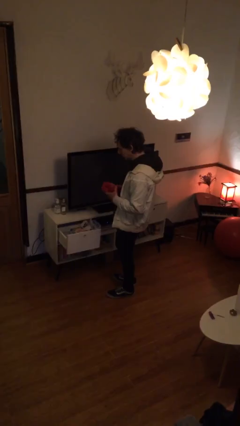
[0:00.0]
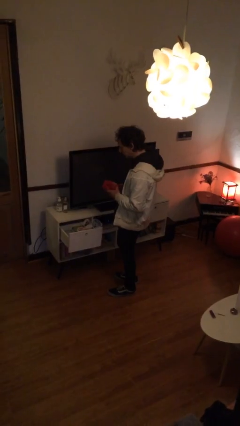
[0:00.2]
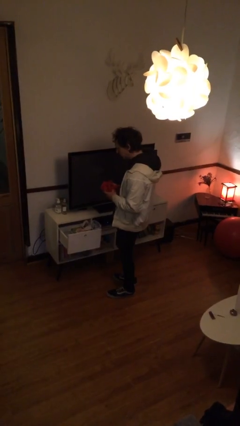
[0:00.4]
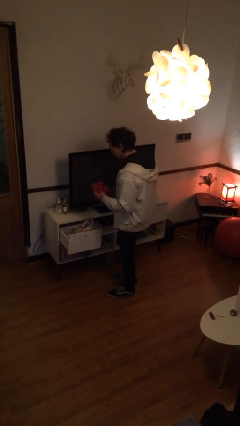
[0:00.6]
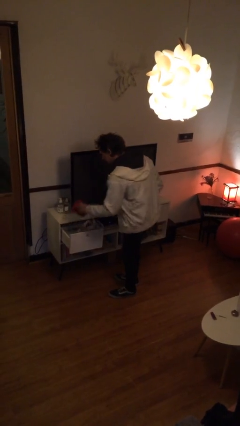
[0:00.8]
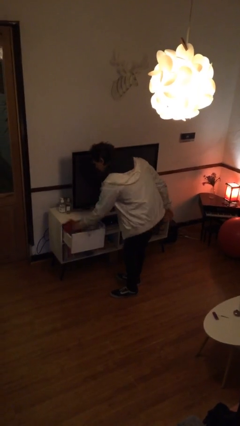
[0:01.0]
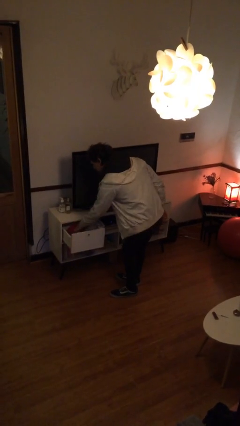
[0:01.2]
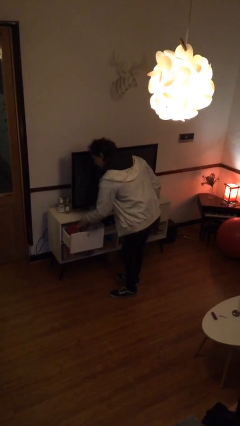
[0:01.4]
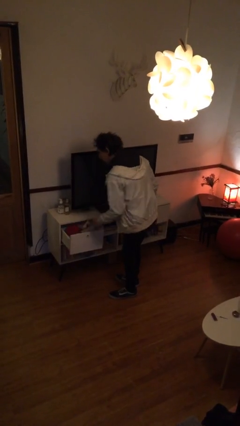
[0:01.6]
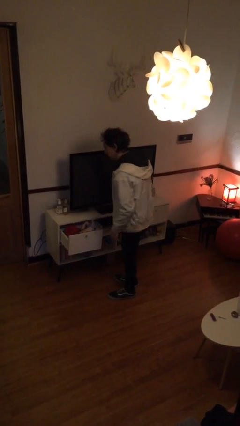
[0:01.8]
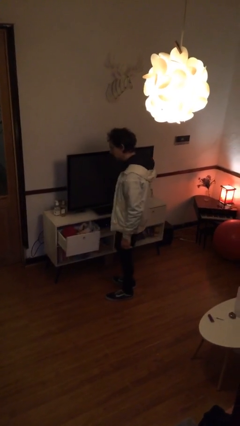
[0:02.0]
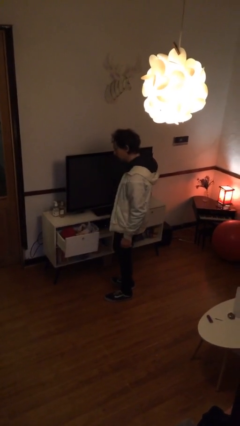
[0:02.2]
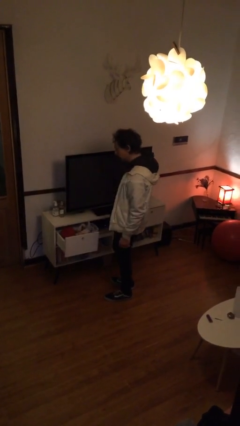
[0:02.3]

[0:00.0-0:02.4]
person puts clothes into dresser

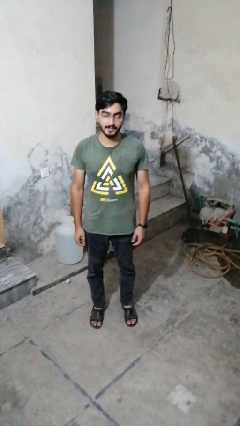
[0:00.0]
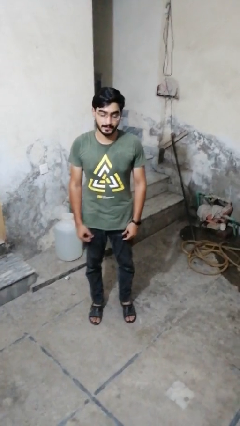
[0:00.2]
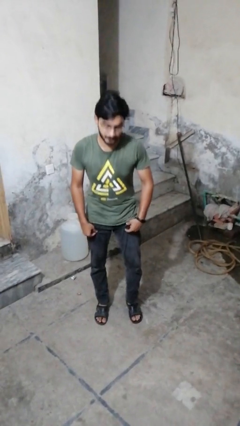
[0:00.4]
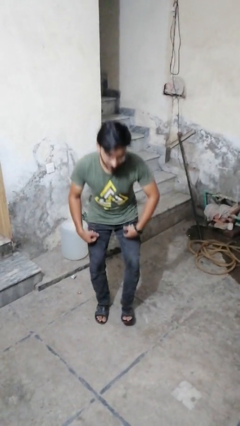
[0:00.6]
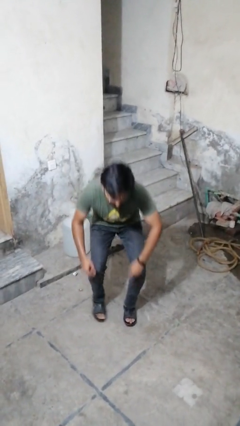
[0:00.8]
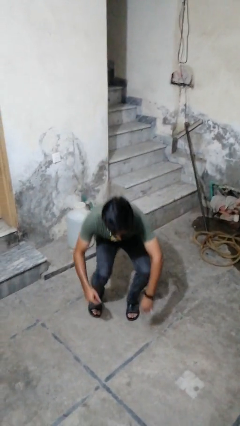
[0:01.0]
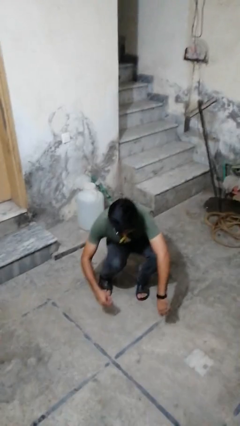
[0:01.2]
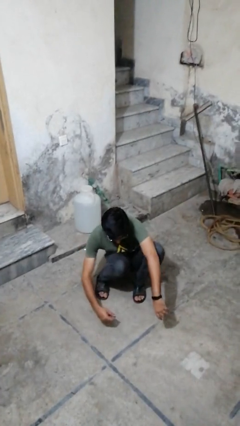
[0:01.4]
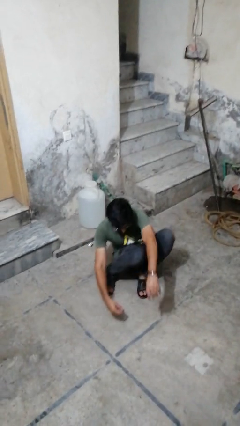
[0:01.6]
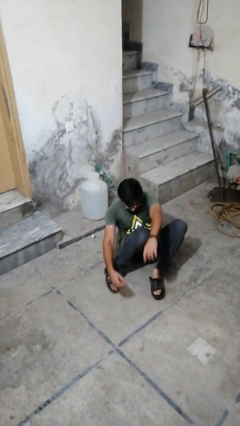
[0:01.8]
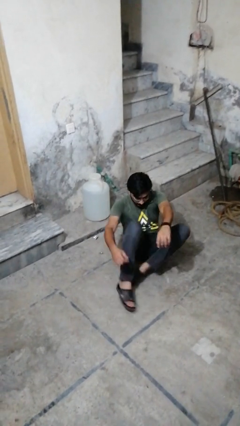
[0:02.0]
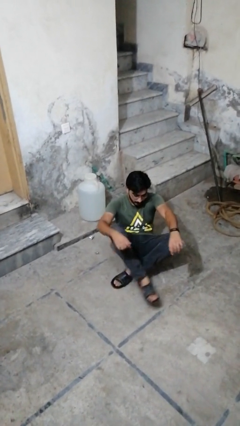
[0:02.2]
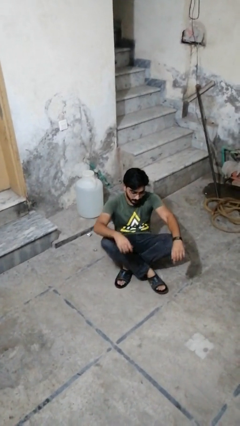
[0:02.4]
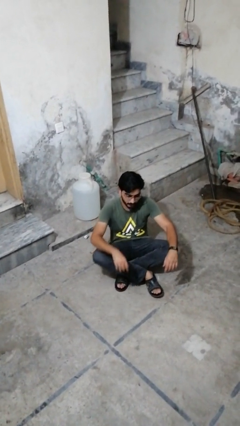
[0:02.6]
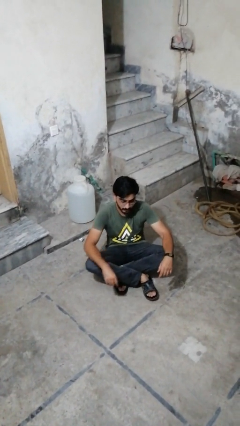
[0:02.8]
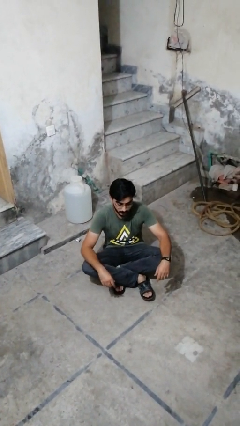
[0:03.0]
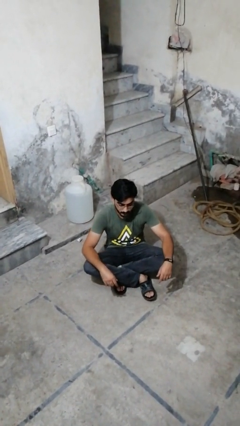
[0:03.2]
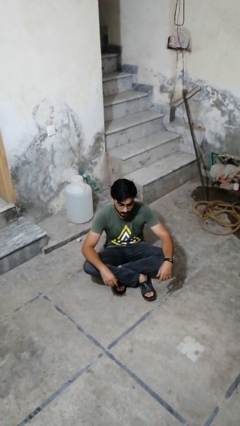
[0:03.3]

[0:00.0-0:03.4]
person sits crisscross

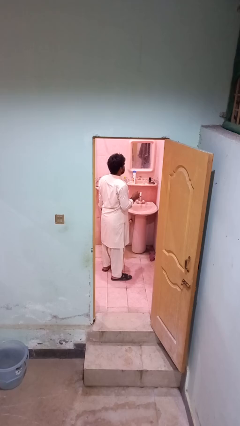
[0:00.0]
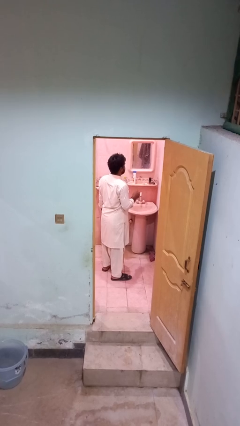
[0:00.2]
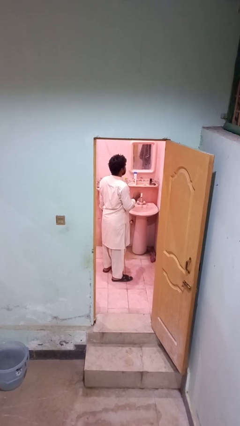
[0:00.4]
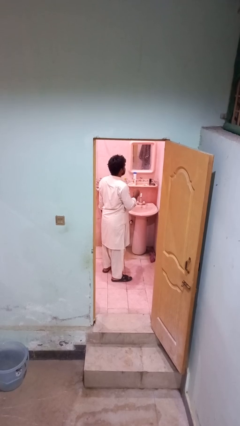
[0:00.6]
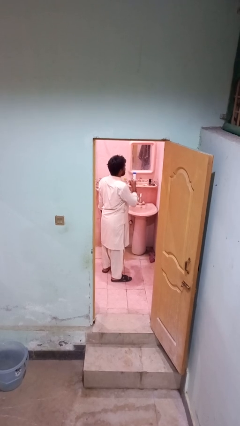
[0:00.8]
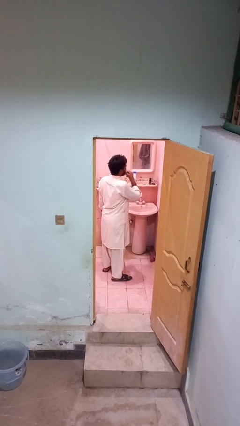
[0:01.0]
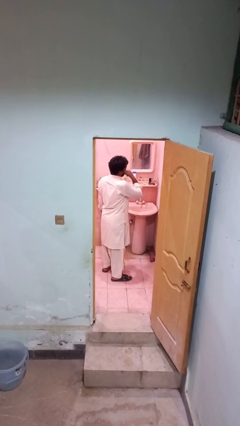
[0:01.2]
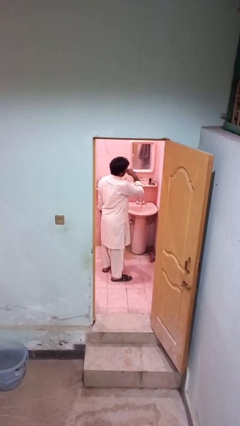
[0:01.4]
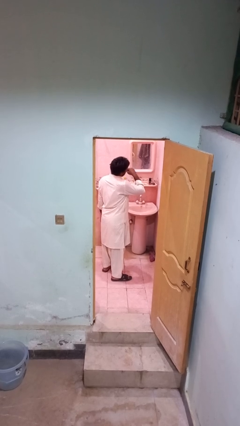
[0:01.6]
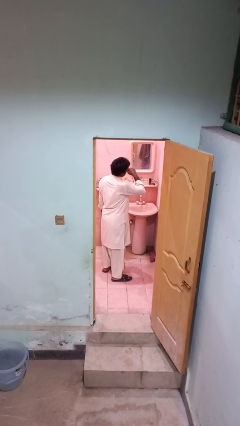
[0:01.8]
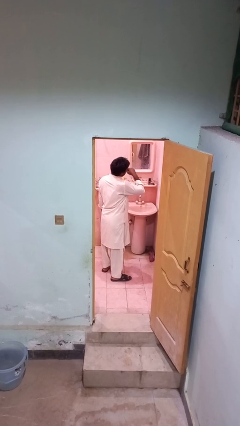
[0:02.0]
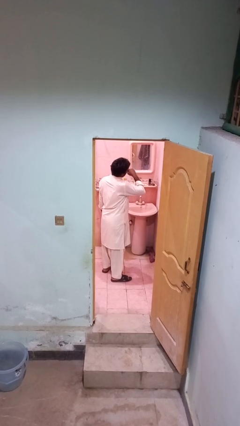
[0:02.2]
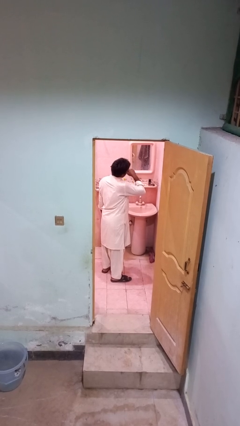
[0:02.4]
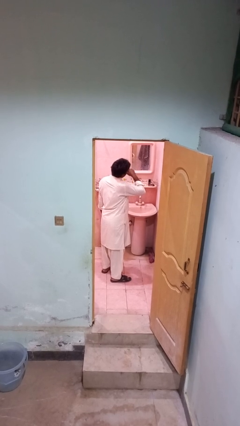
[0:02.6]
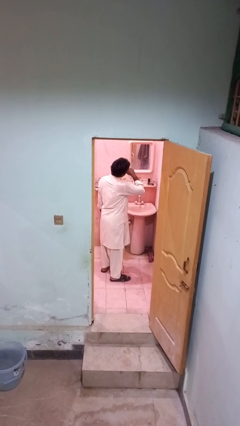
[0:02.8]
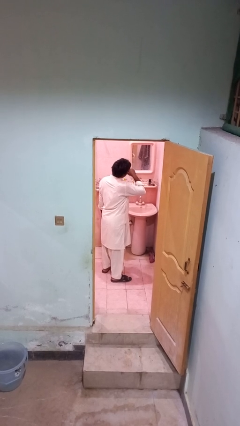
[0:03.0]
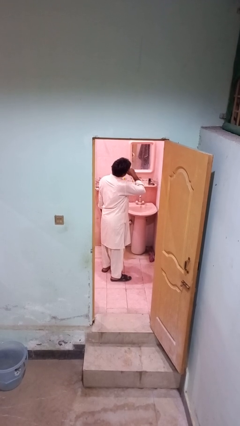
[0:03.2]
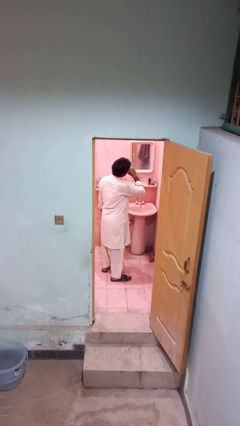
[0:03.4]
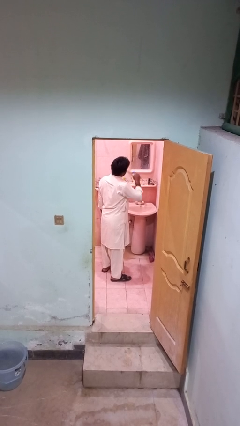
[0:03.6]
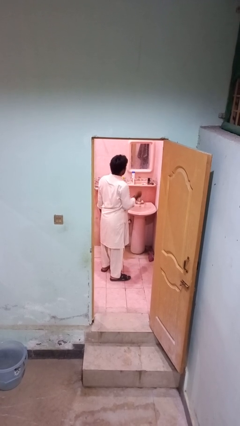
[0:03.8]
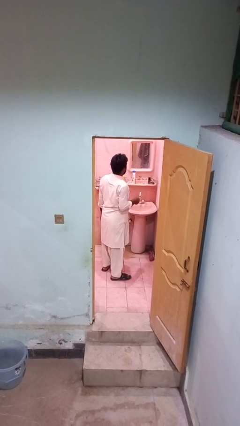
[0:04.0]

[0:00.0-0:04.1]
person flosses

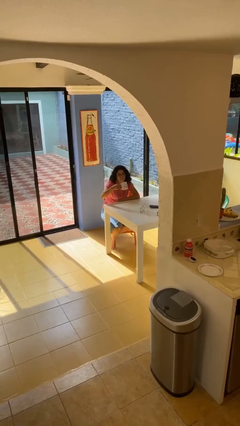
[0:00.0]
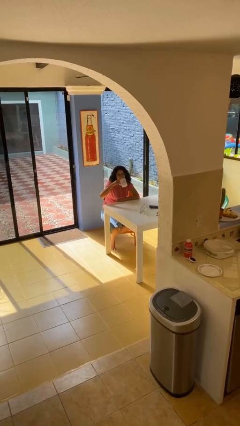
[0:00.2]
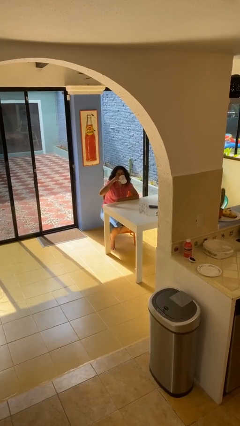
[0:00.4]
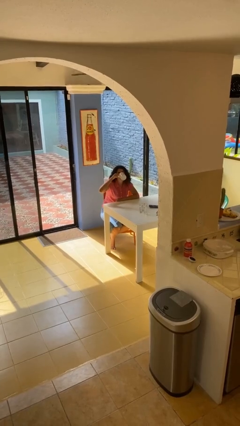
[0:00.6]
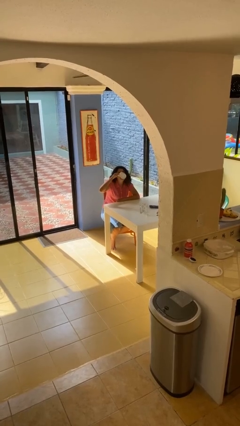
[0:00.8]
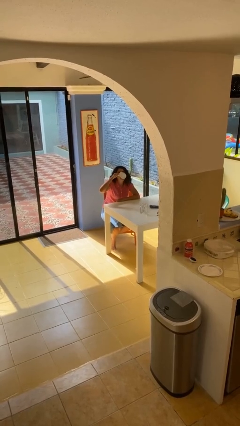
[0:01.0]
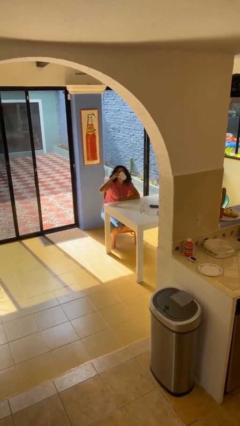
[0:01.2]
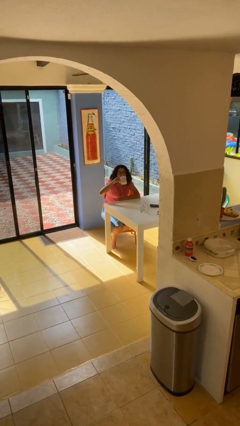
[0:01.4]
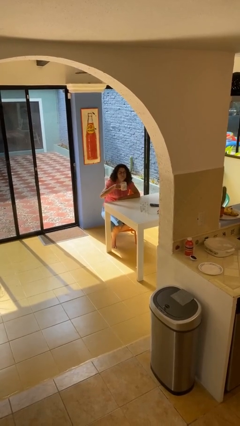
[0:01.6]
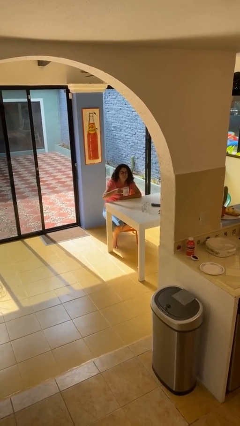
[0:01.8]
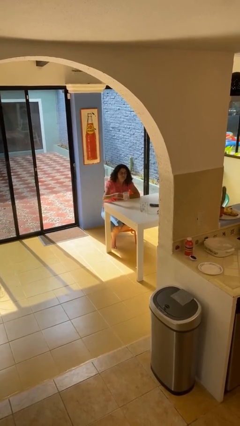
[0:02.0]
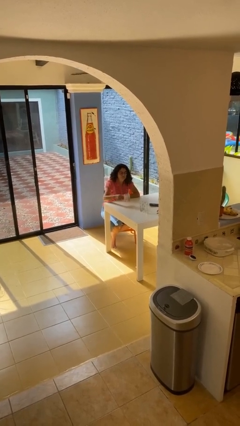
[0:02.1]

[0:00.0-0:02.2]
person drinks from mug

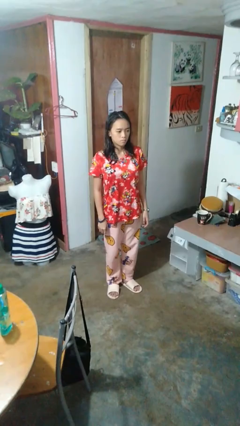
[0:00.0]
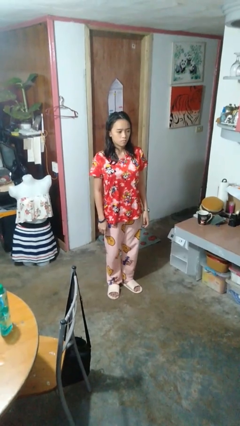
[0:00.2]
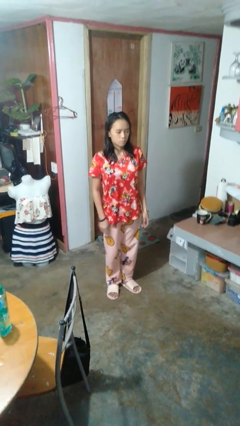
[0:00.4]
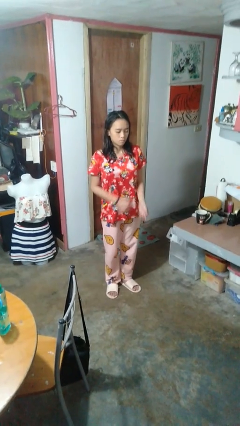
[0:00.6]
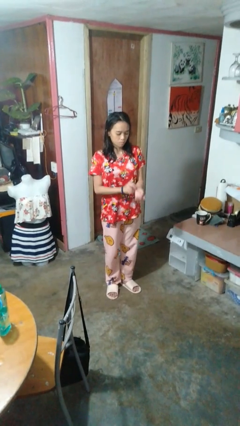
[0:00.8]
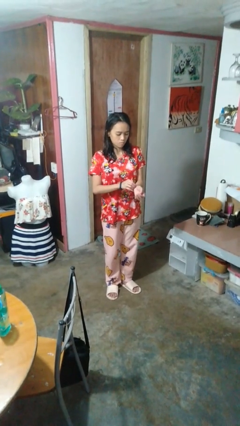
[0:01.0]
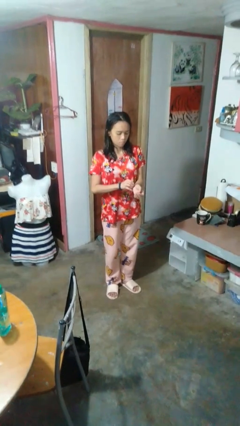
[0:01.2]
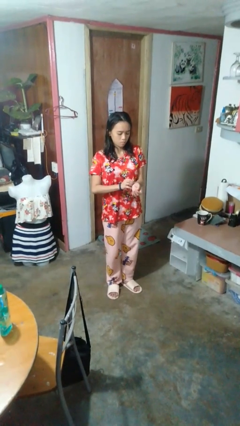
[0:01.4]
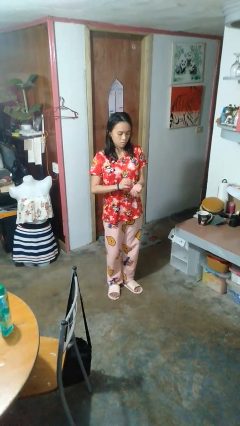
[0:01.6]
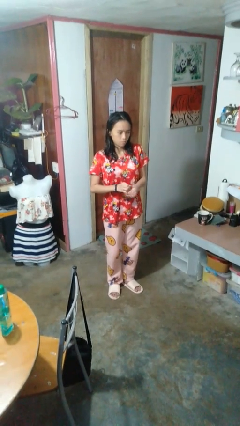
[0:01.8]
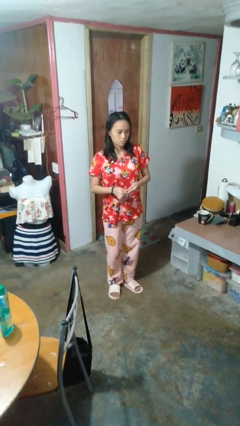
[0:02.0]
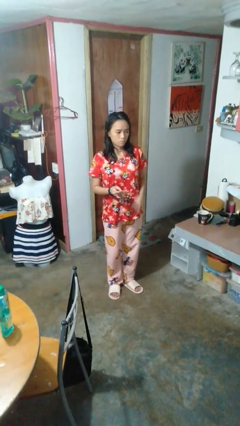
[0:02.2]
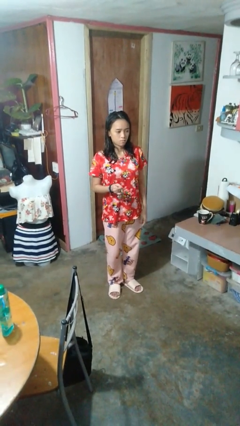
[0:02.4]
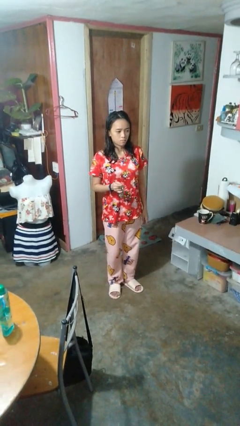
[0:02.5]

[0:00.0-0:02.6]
person takes off wristwatch

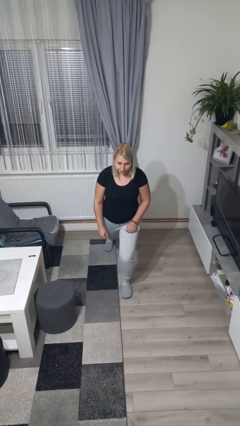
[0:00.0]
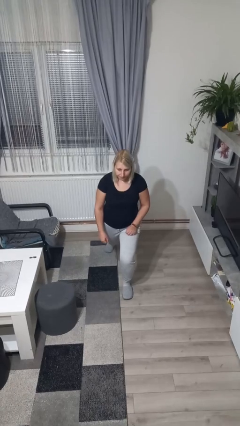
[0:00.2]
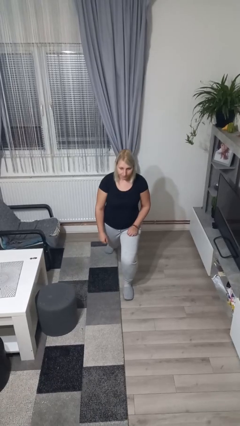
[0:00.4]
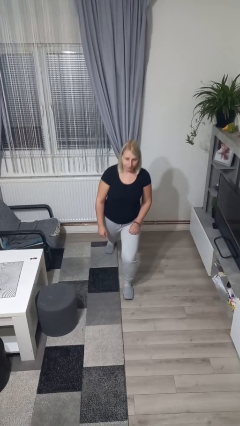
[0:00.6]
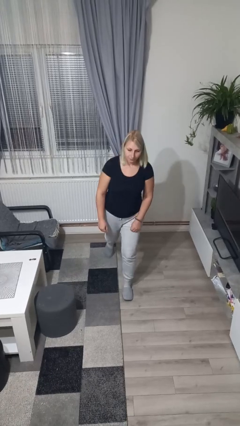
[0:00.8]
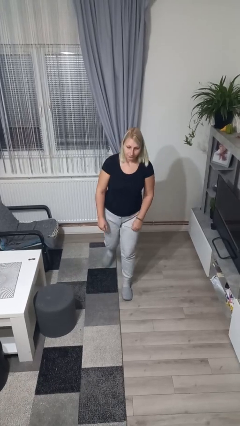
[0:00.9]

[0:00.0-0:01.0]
person exercises with lunges

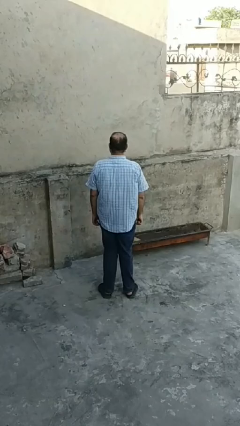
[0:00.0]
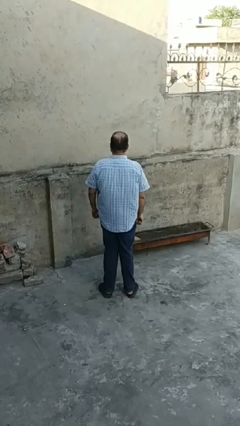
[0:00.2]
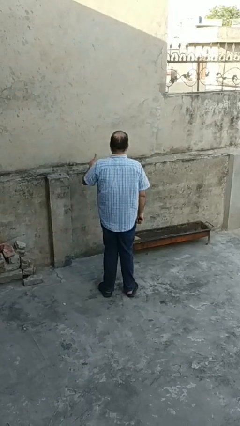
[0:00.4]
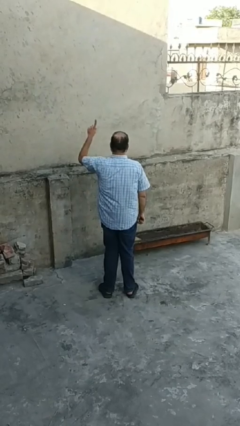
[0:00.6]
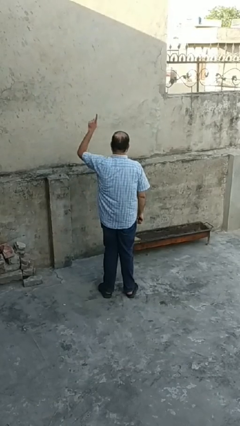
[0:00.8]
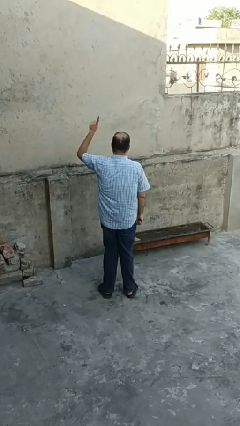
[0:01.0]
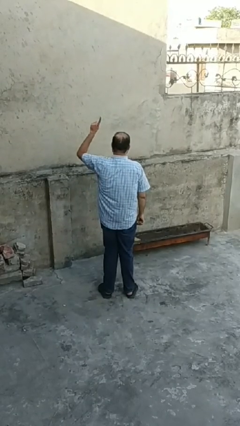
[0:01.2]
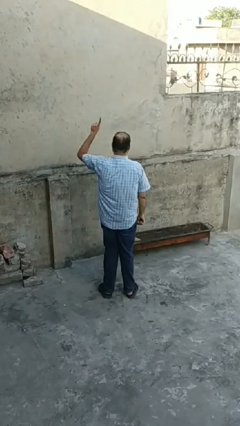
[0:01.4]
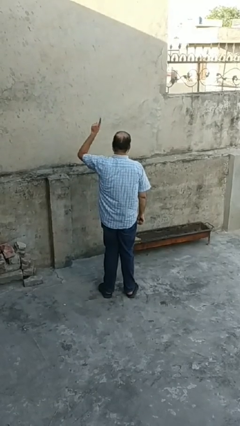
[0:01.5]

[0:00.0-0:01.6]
person gestures number one
